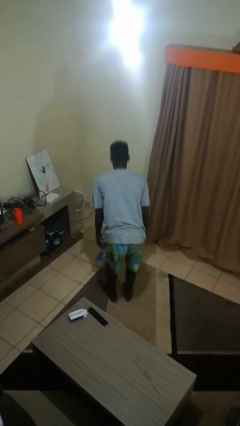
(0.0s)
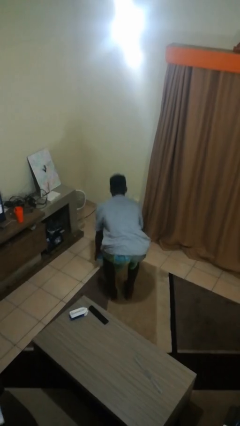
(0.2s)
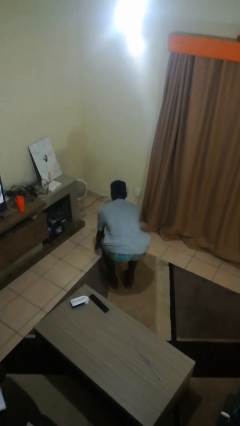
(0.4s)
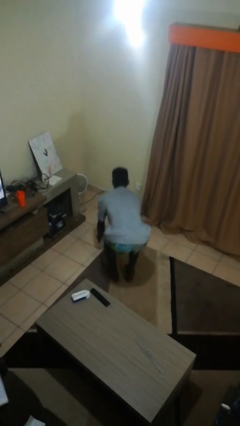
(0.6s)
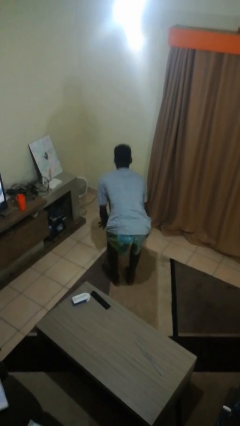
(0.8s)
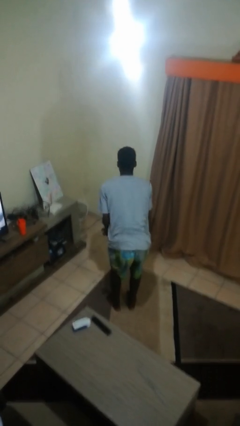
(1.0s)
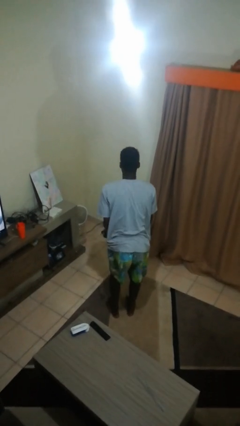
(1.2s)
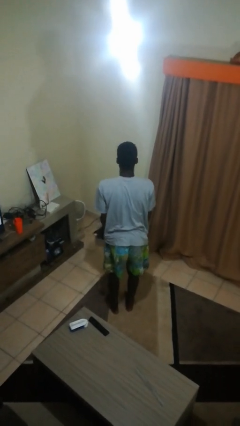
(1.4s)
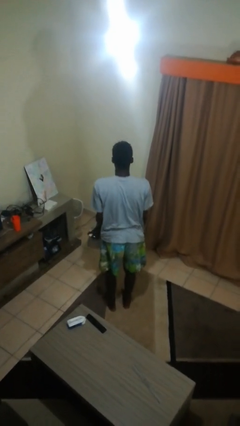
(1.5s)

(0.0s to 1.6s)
person picks up object from floor

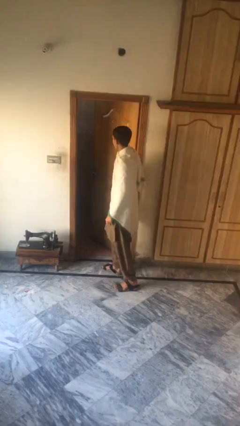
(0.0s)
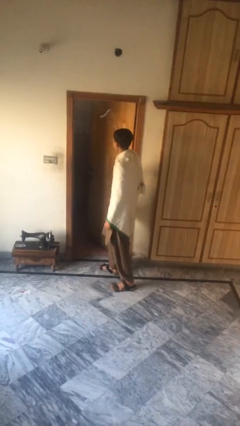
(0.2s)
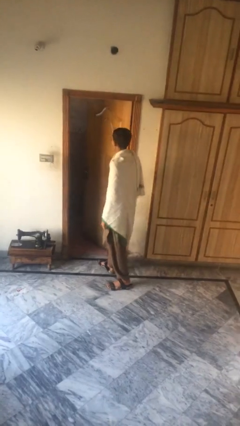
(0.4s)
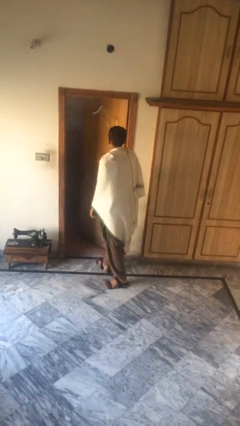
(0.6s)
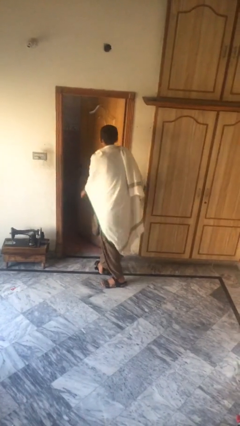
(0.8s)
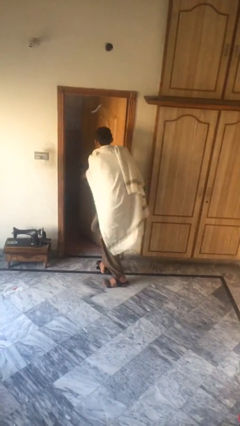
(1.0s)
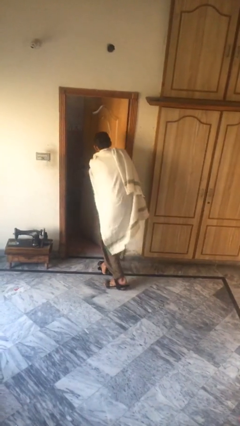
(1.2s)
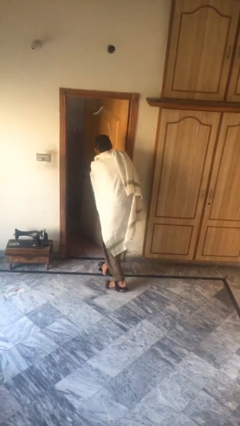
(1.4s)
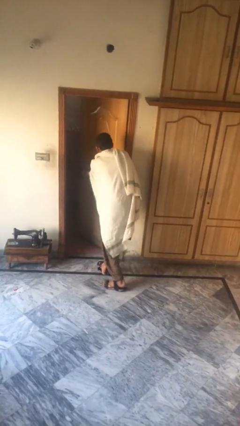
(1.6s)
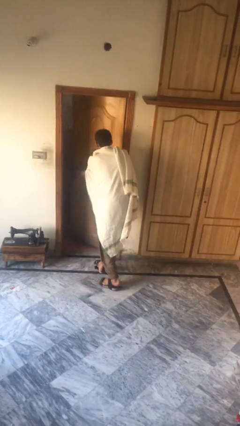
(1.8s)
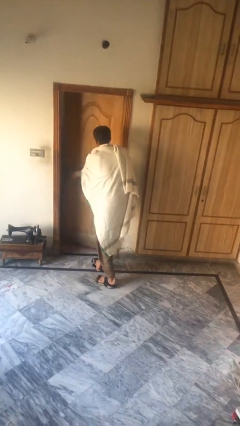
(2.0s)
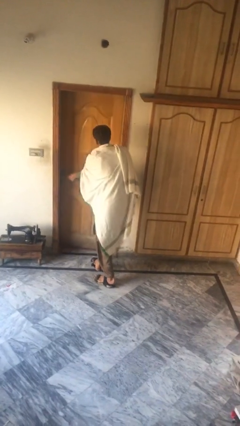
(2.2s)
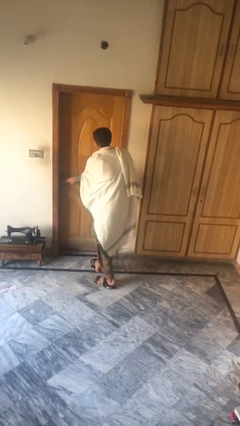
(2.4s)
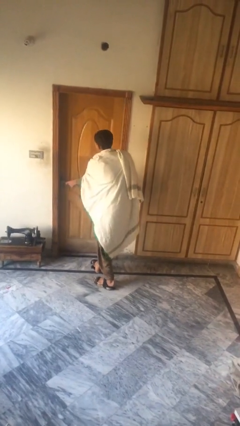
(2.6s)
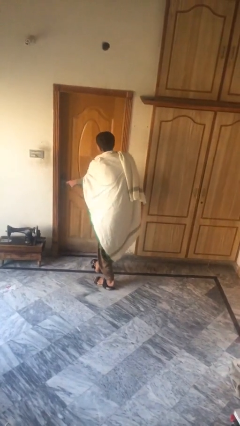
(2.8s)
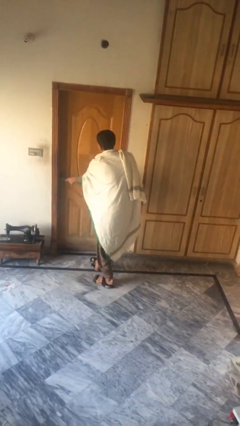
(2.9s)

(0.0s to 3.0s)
person closes facility door

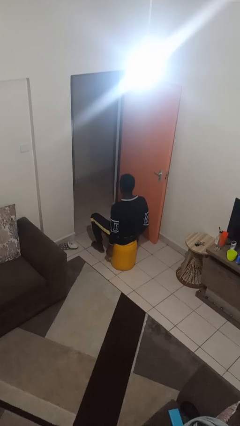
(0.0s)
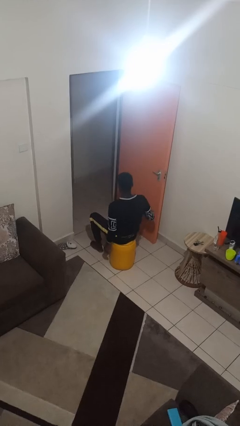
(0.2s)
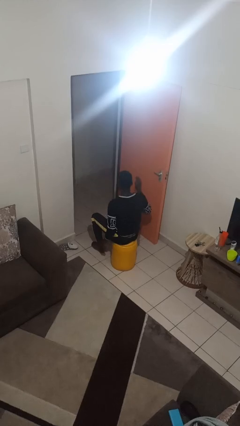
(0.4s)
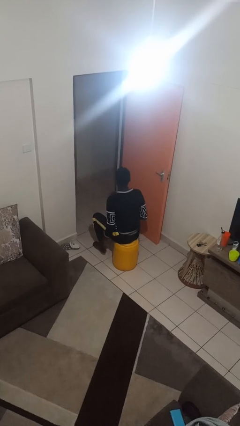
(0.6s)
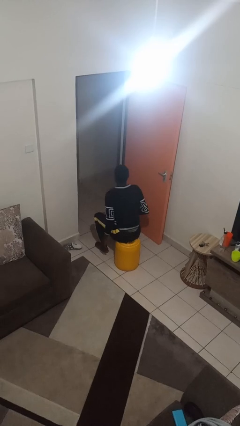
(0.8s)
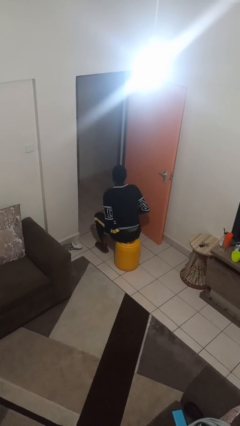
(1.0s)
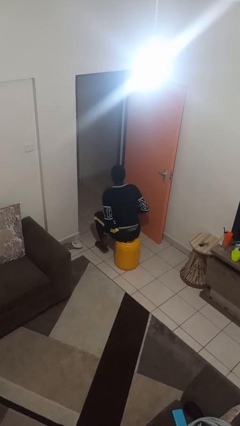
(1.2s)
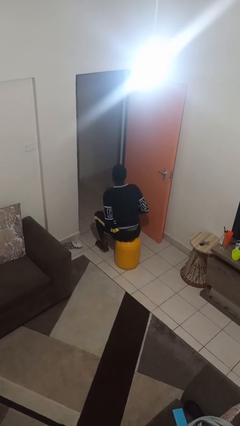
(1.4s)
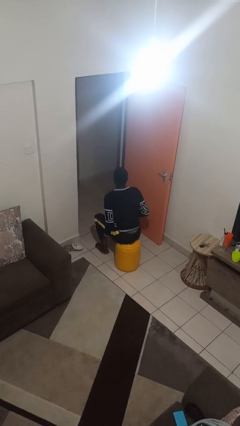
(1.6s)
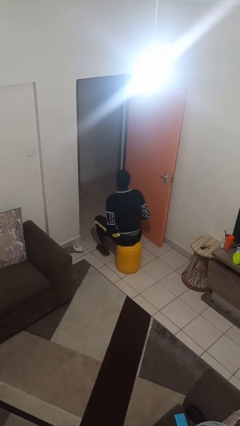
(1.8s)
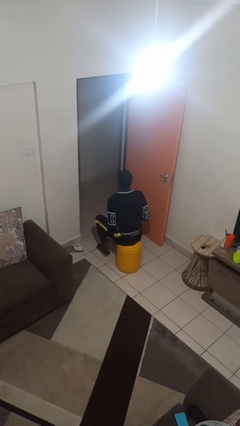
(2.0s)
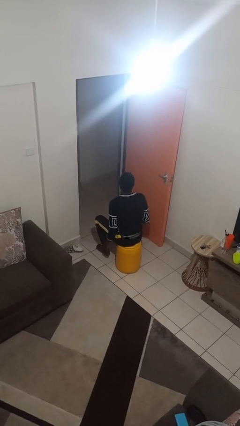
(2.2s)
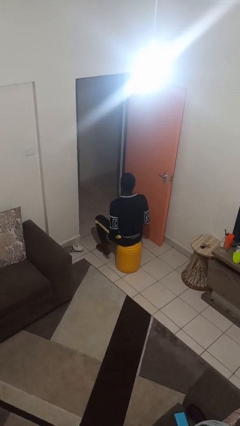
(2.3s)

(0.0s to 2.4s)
person slaps hands on thighs

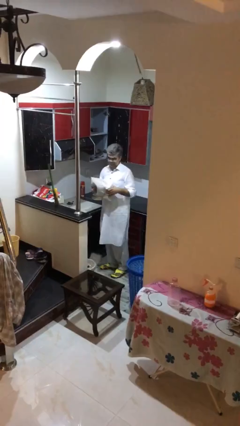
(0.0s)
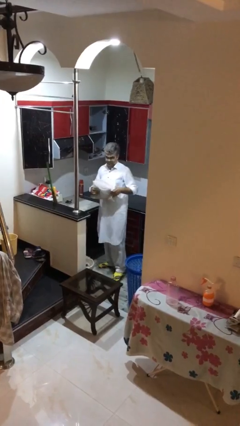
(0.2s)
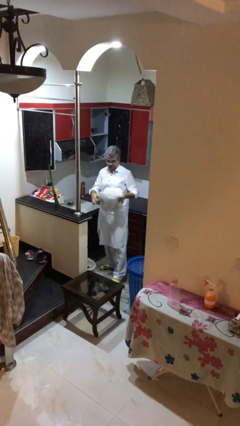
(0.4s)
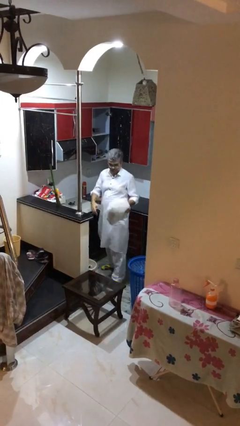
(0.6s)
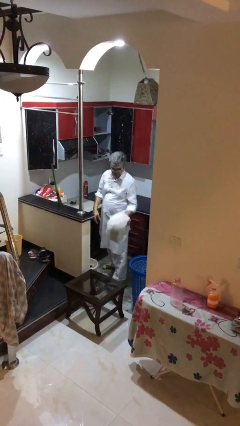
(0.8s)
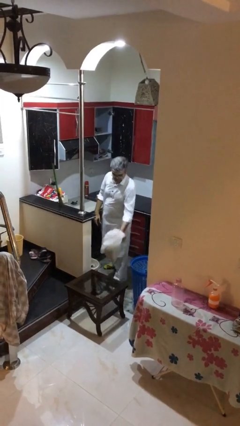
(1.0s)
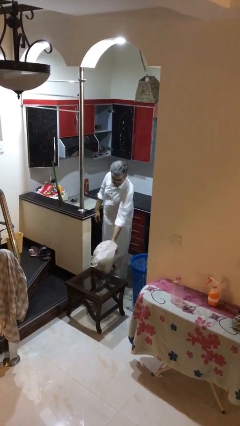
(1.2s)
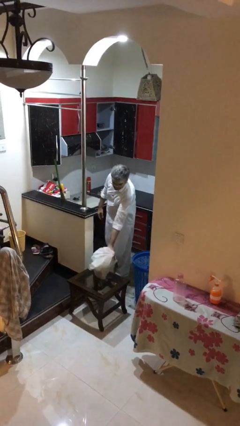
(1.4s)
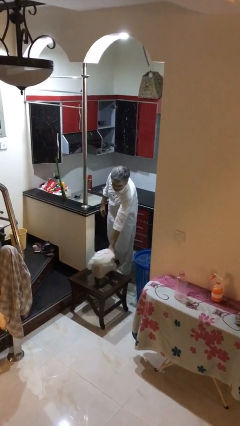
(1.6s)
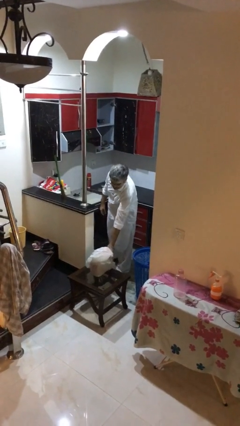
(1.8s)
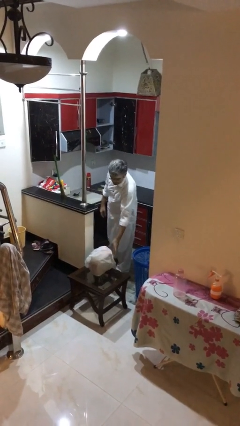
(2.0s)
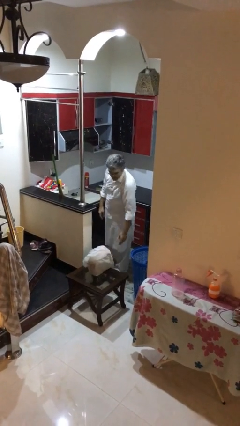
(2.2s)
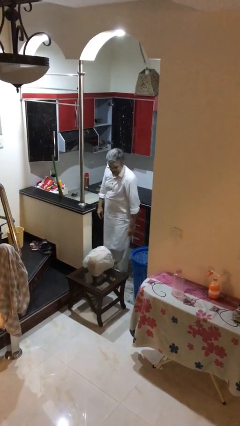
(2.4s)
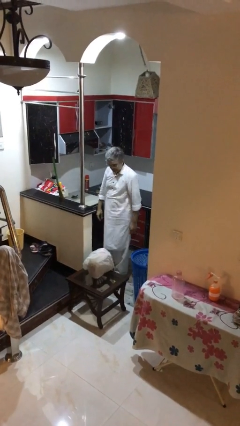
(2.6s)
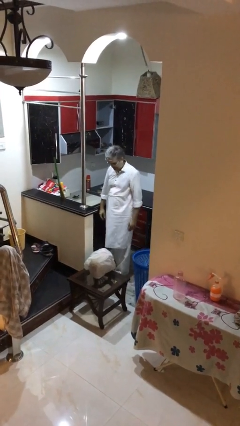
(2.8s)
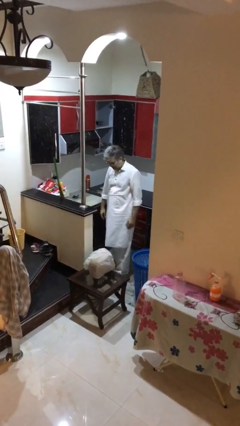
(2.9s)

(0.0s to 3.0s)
person puts down object on table

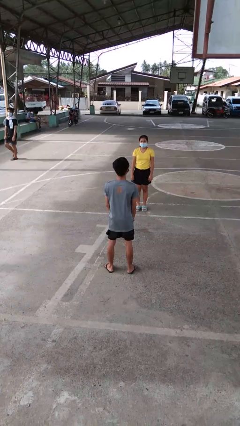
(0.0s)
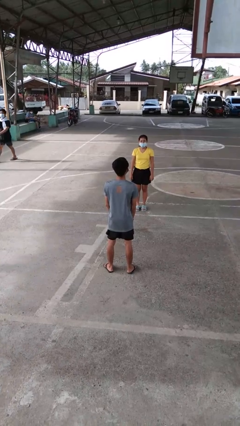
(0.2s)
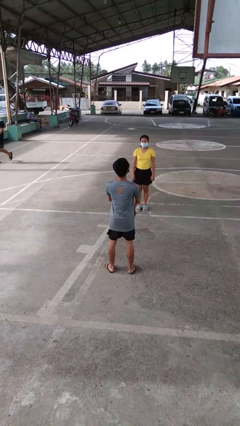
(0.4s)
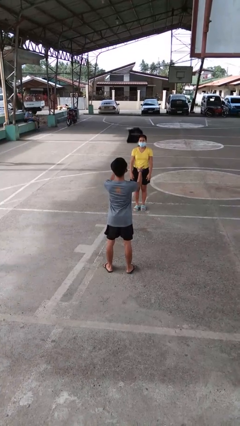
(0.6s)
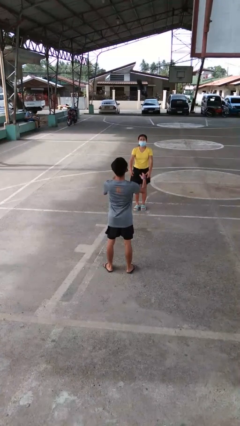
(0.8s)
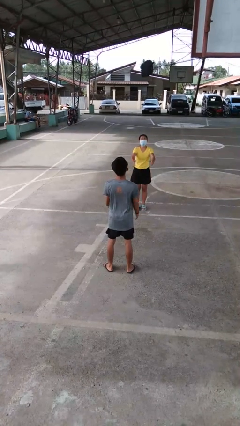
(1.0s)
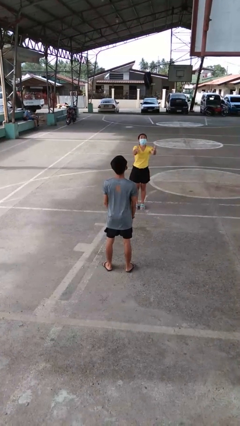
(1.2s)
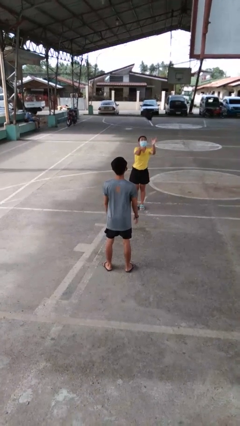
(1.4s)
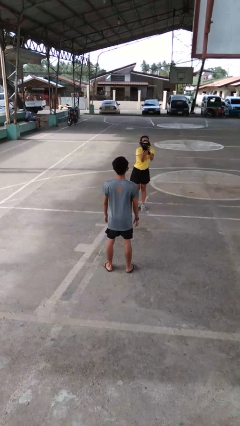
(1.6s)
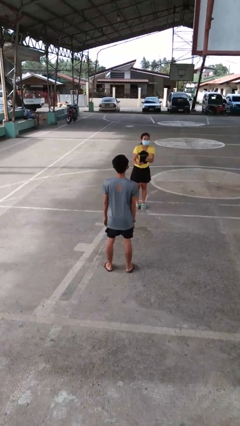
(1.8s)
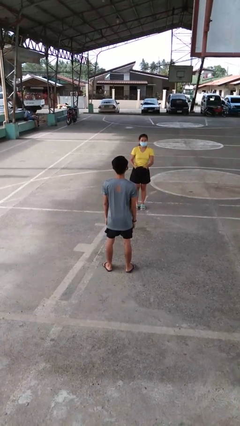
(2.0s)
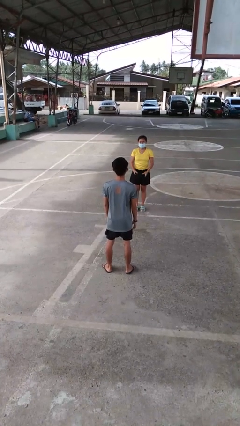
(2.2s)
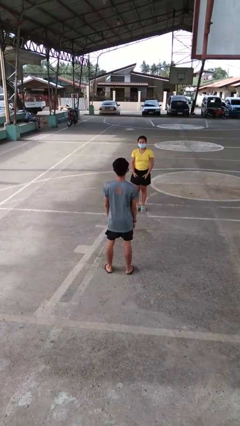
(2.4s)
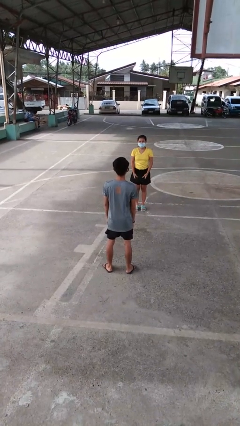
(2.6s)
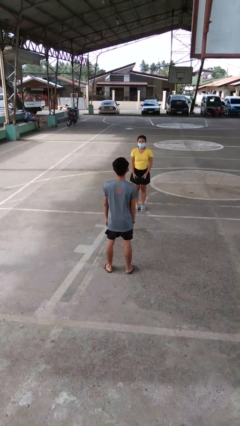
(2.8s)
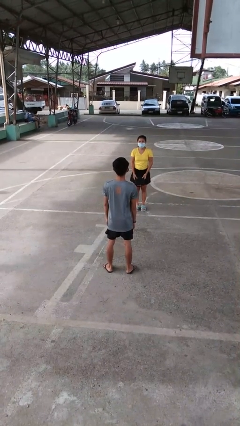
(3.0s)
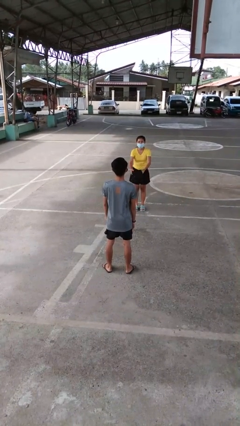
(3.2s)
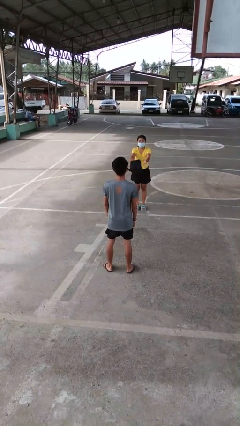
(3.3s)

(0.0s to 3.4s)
person throws object to person

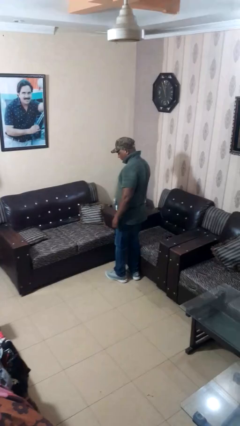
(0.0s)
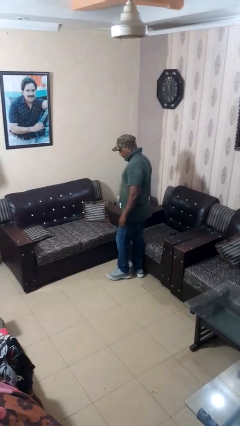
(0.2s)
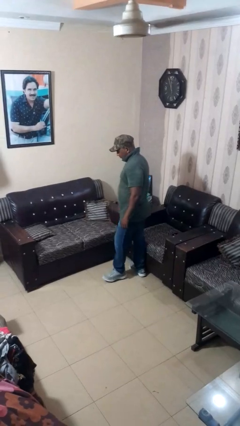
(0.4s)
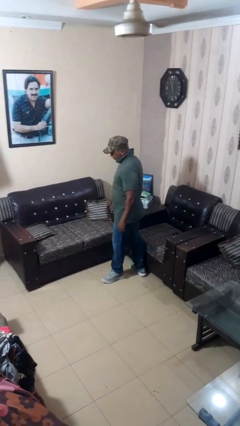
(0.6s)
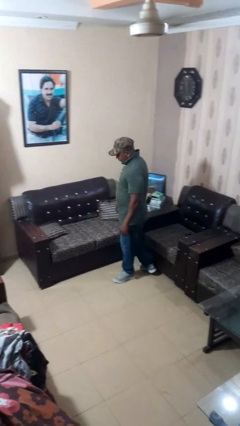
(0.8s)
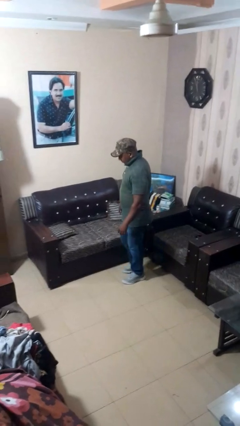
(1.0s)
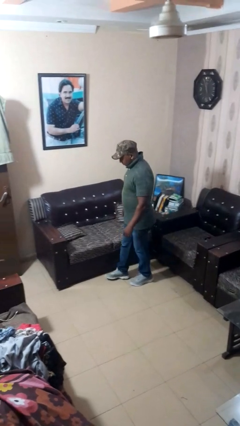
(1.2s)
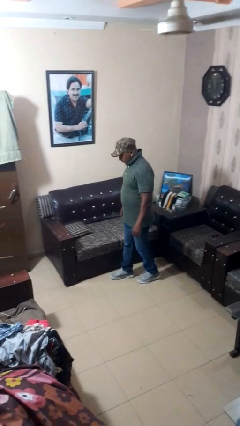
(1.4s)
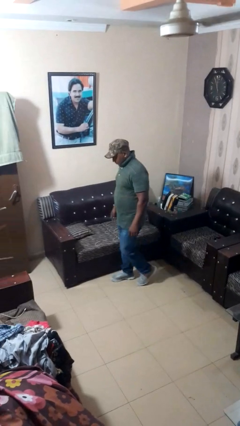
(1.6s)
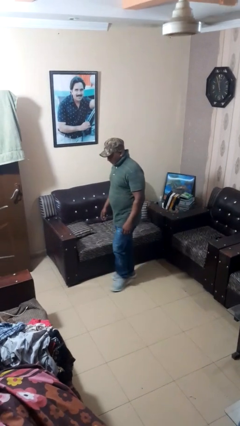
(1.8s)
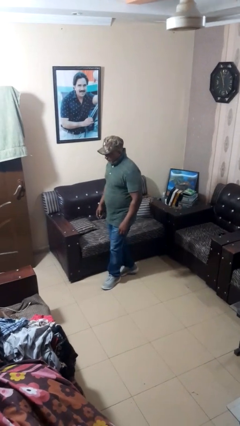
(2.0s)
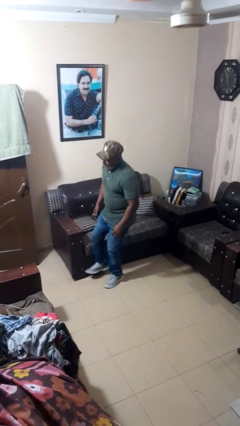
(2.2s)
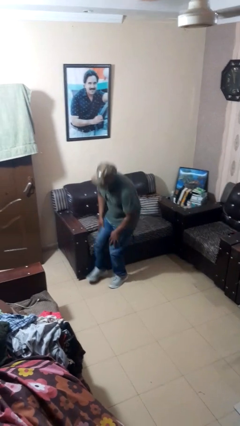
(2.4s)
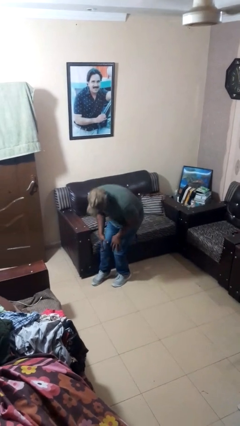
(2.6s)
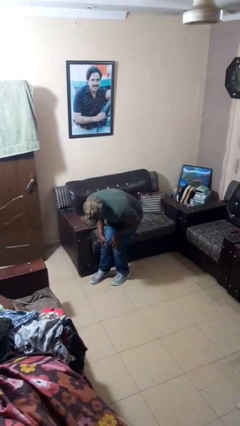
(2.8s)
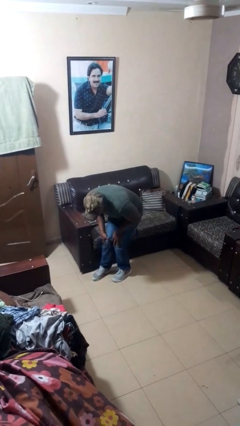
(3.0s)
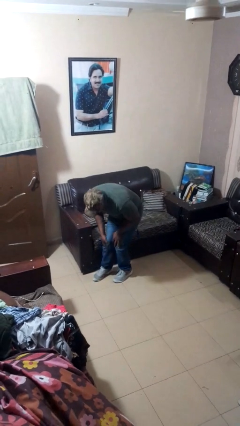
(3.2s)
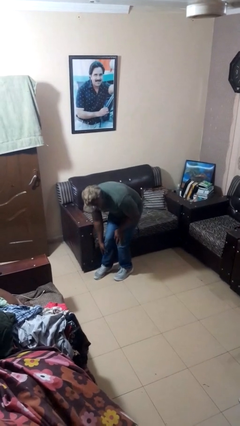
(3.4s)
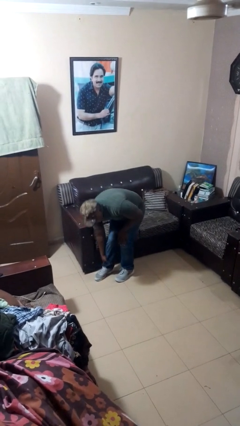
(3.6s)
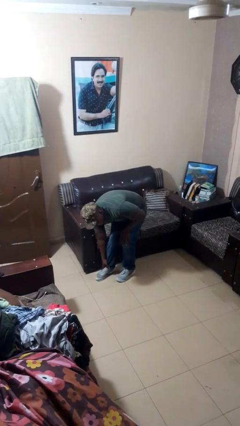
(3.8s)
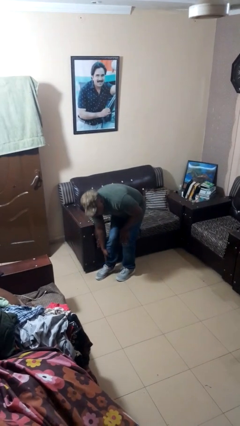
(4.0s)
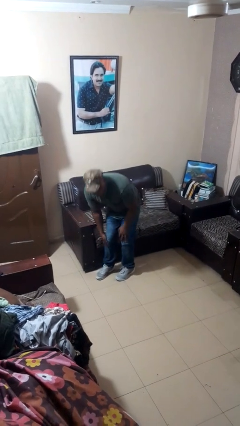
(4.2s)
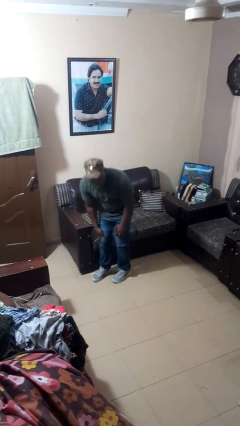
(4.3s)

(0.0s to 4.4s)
person stubs toe
